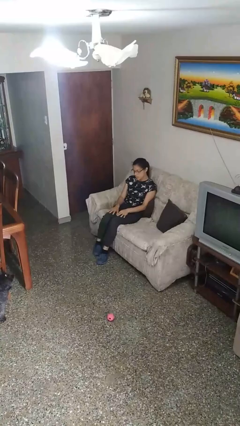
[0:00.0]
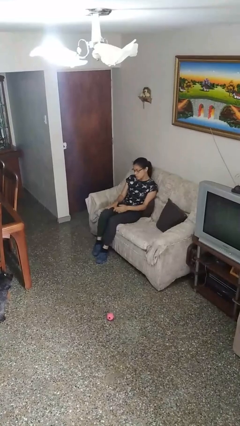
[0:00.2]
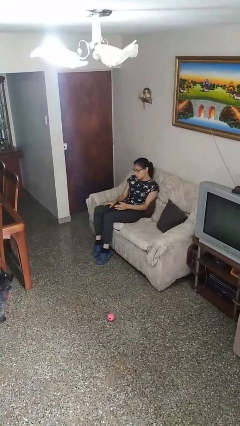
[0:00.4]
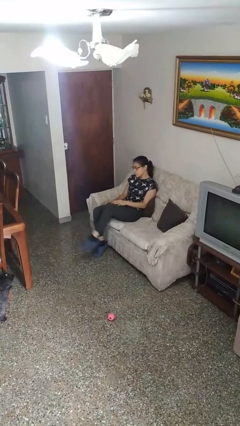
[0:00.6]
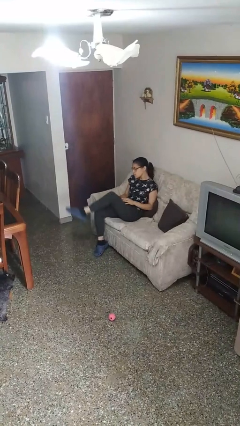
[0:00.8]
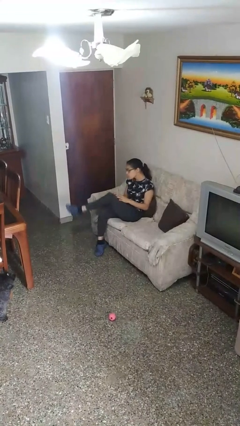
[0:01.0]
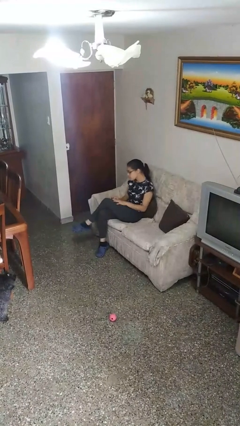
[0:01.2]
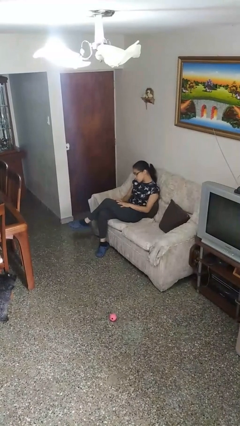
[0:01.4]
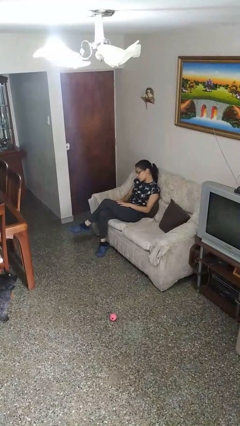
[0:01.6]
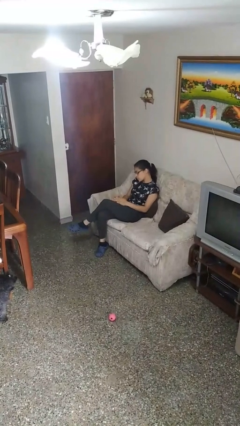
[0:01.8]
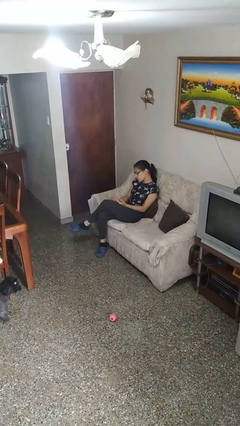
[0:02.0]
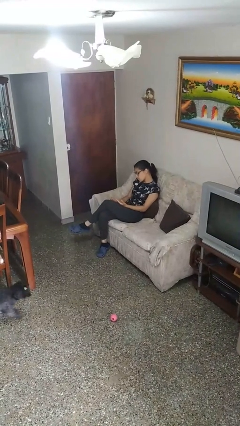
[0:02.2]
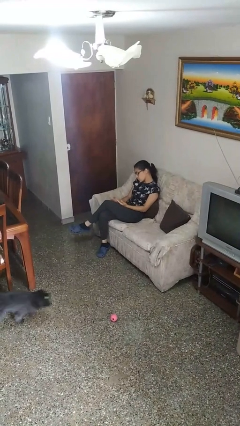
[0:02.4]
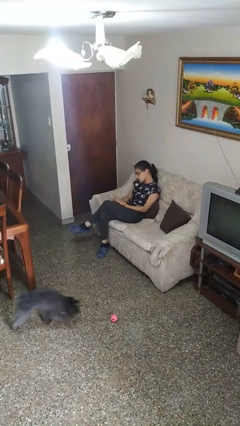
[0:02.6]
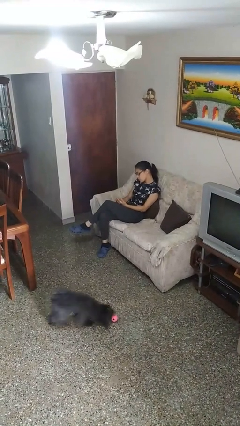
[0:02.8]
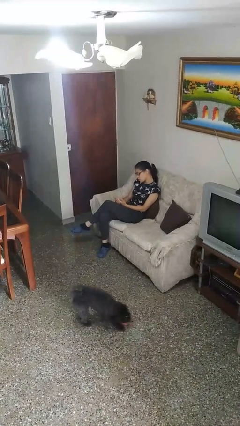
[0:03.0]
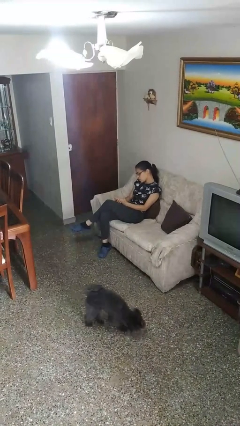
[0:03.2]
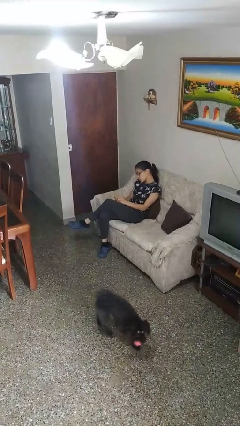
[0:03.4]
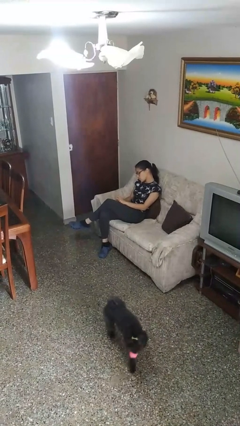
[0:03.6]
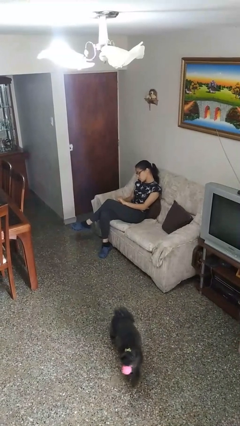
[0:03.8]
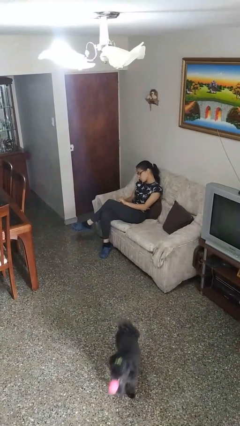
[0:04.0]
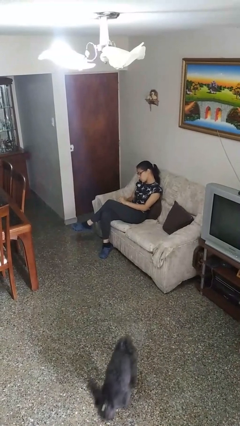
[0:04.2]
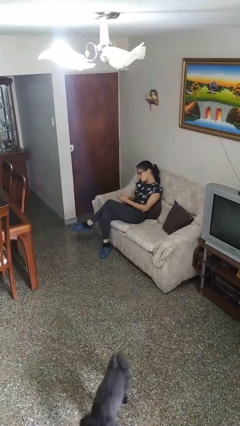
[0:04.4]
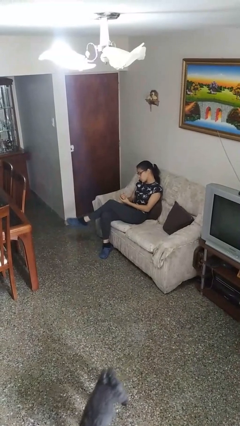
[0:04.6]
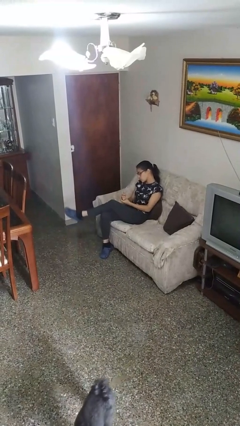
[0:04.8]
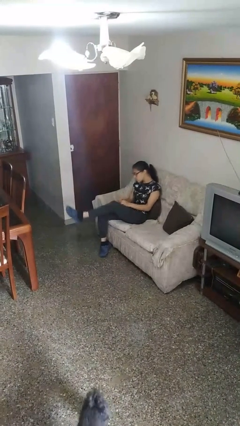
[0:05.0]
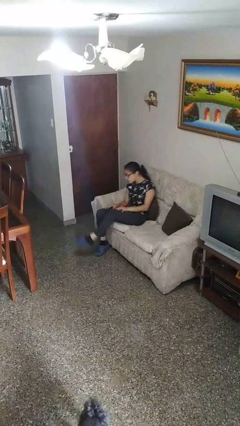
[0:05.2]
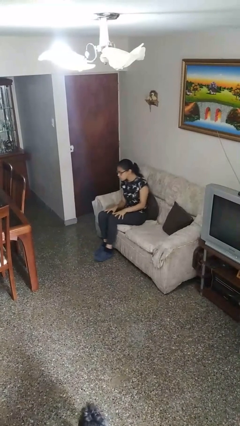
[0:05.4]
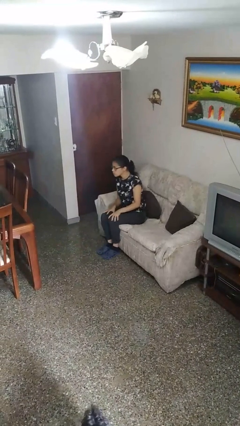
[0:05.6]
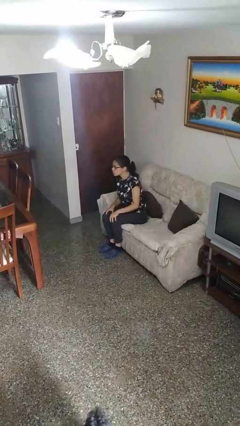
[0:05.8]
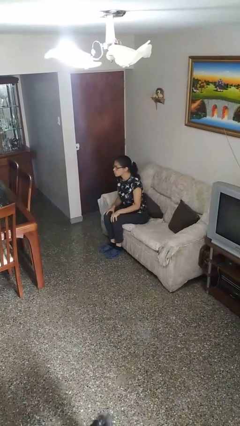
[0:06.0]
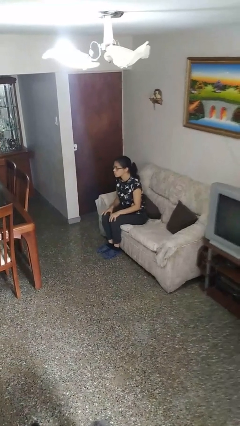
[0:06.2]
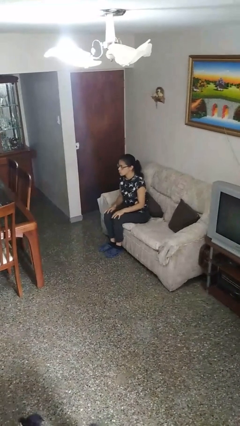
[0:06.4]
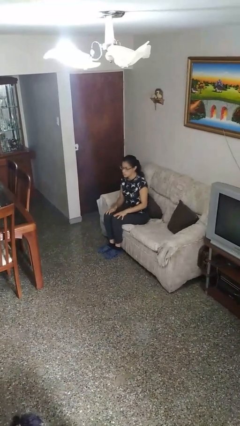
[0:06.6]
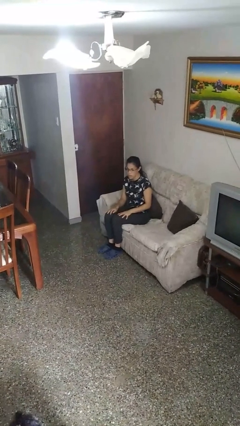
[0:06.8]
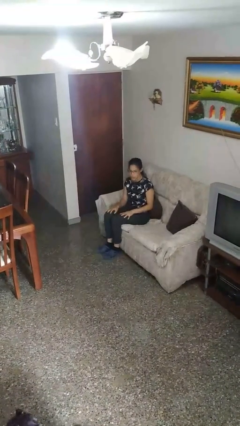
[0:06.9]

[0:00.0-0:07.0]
person looks at hands in lap

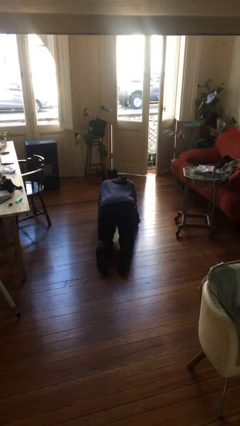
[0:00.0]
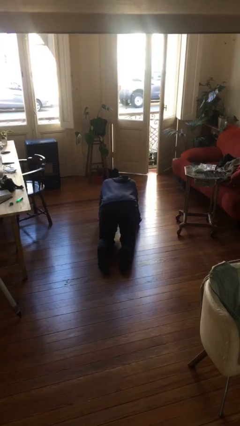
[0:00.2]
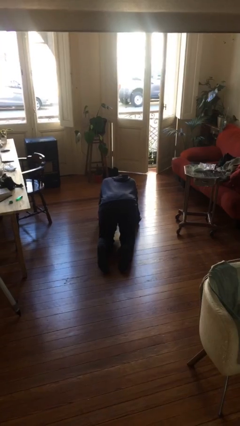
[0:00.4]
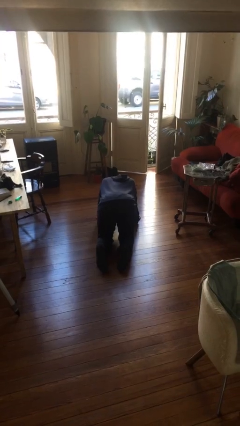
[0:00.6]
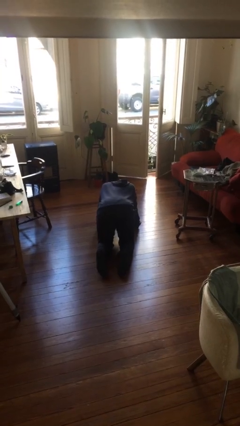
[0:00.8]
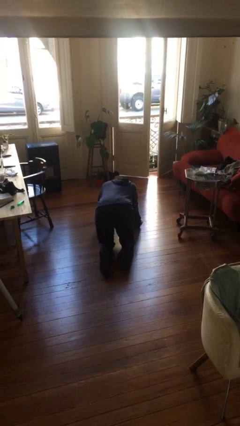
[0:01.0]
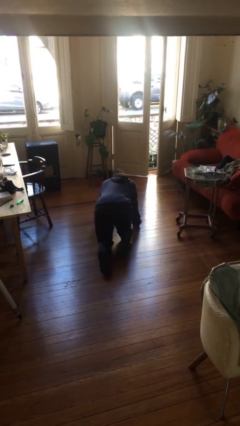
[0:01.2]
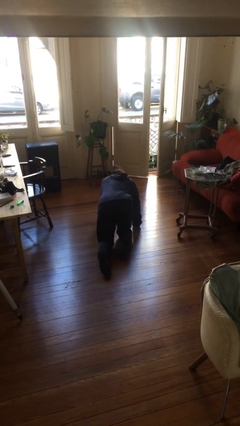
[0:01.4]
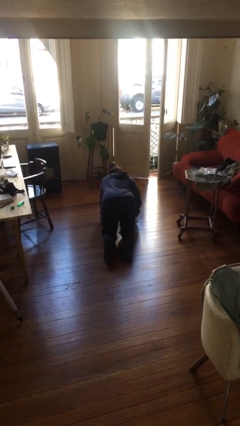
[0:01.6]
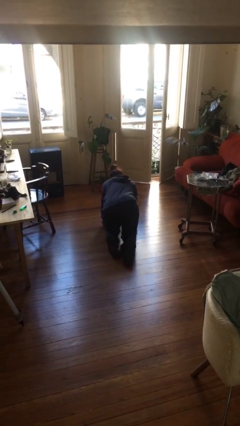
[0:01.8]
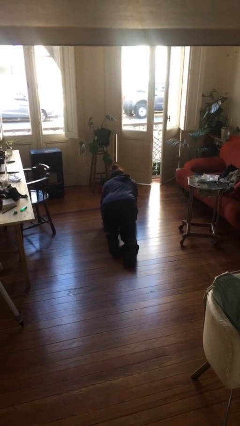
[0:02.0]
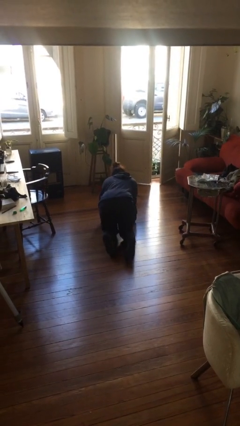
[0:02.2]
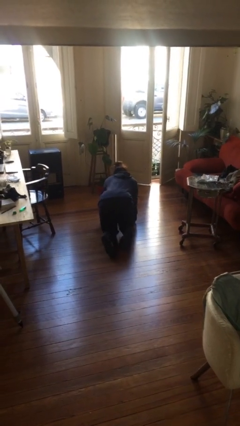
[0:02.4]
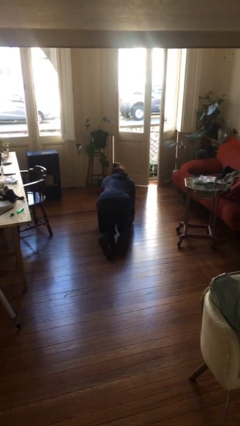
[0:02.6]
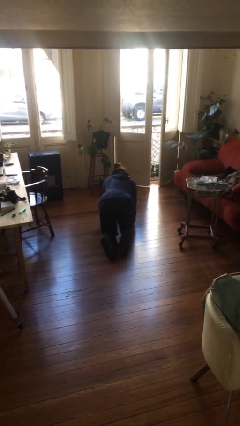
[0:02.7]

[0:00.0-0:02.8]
person crawls

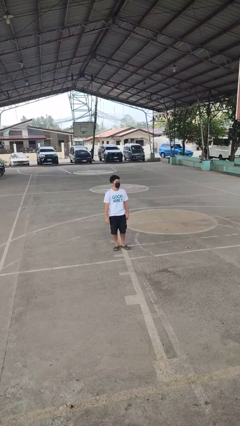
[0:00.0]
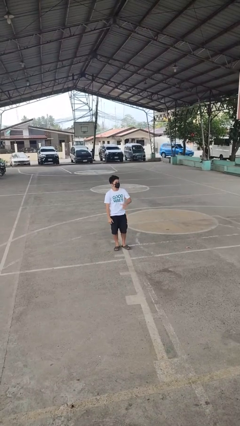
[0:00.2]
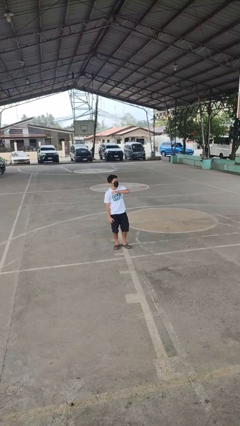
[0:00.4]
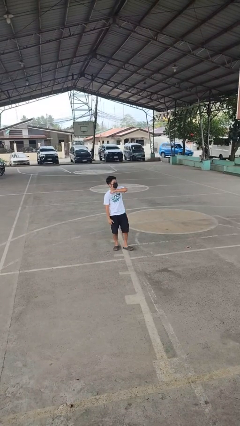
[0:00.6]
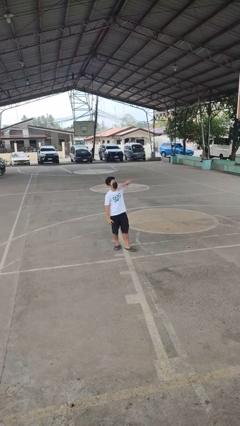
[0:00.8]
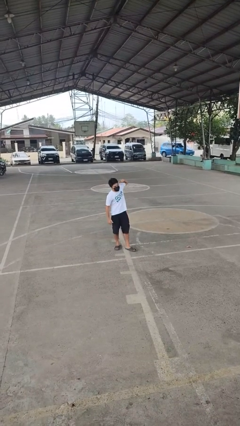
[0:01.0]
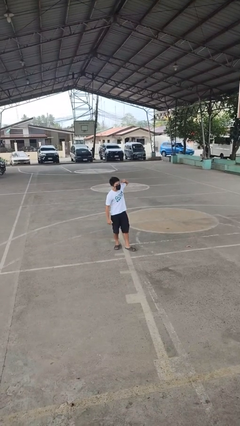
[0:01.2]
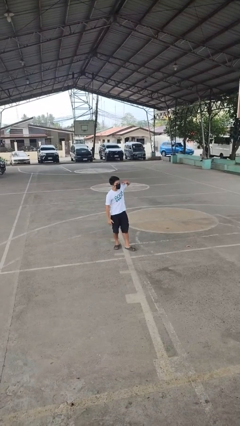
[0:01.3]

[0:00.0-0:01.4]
person gestures cut

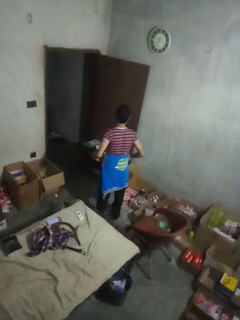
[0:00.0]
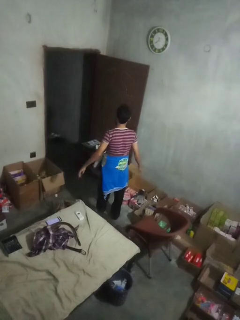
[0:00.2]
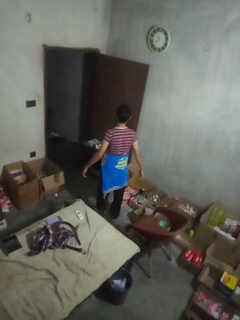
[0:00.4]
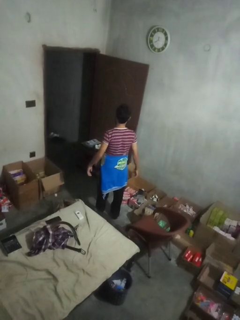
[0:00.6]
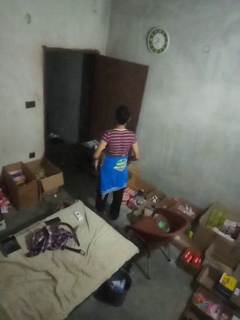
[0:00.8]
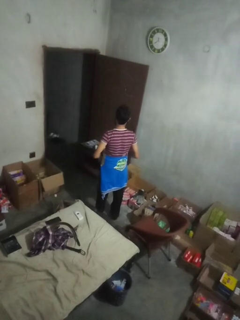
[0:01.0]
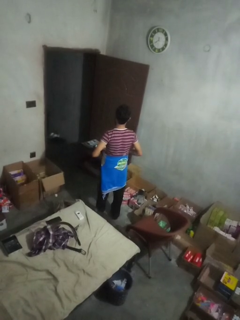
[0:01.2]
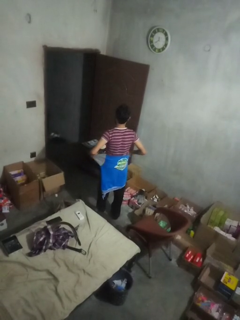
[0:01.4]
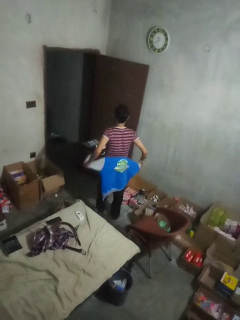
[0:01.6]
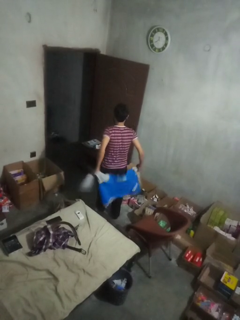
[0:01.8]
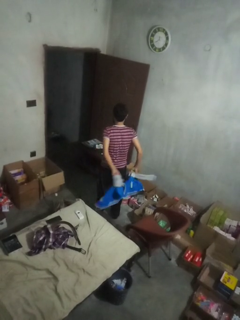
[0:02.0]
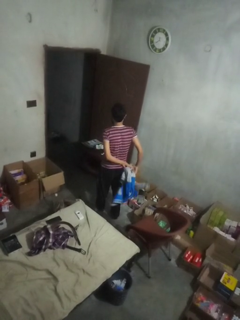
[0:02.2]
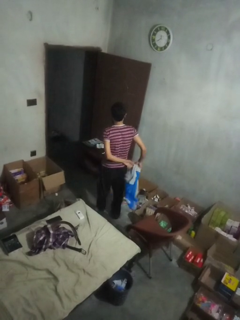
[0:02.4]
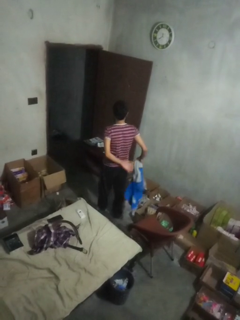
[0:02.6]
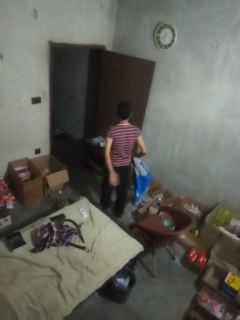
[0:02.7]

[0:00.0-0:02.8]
person unties jacket around waist

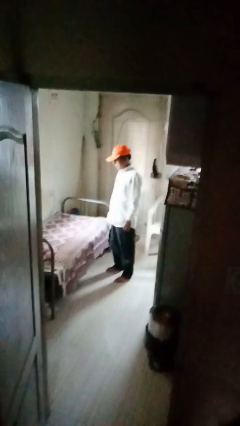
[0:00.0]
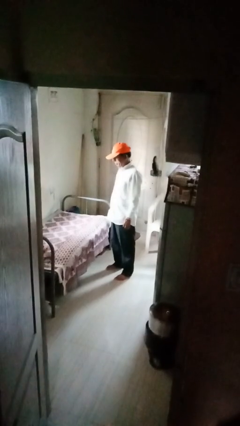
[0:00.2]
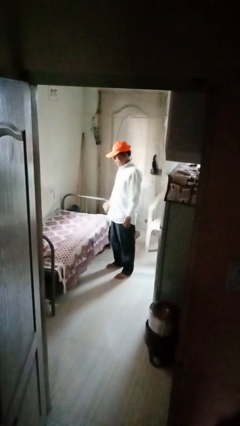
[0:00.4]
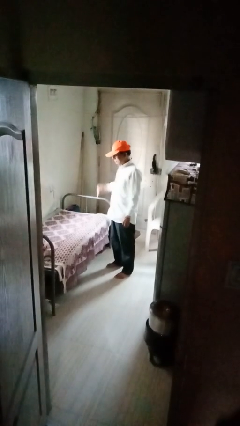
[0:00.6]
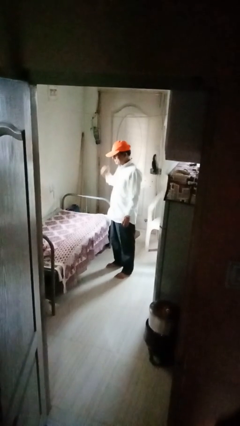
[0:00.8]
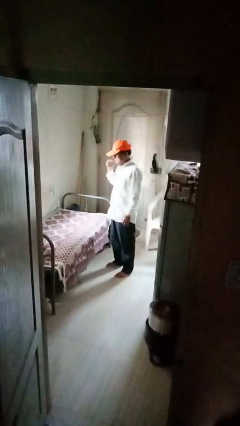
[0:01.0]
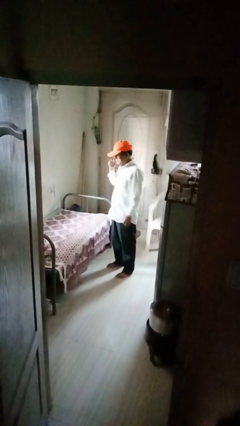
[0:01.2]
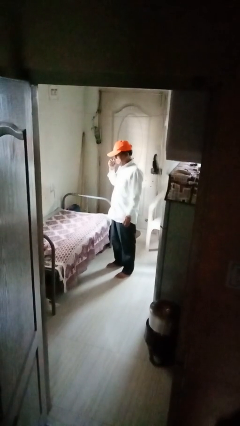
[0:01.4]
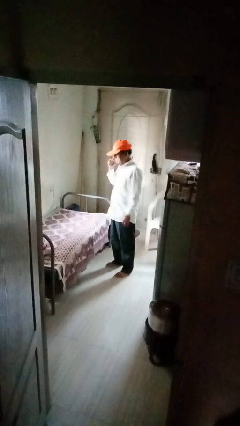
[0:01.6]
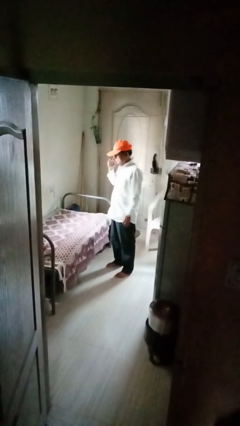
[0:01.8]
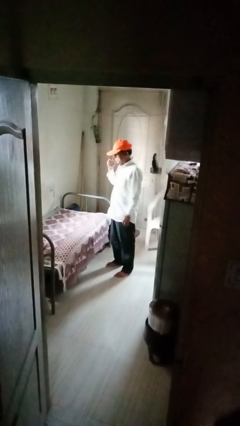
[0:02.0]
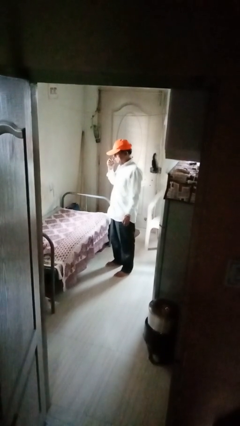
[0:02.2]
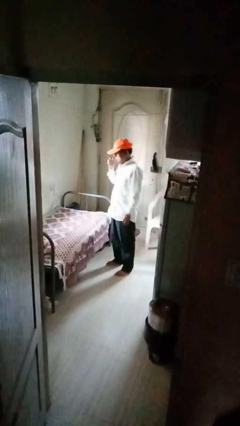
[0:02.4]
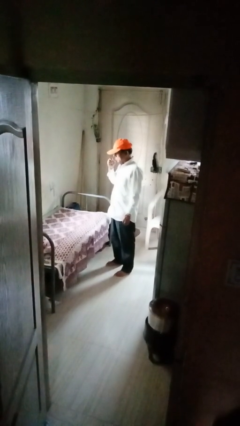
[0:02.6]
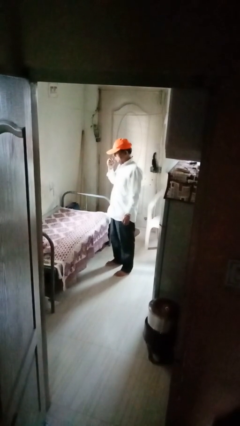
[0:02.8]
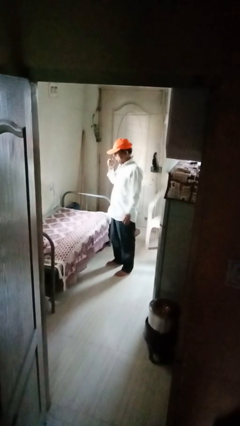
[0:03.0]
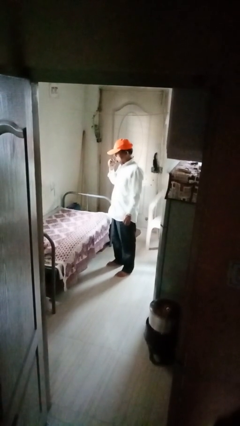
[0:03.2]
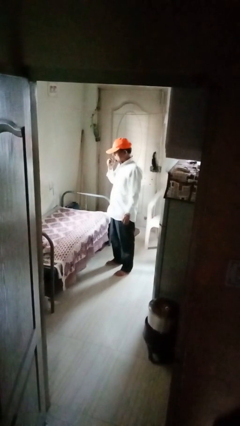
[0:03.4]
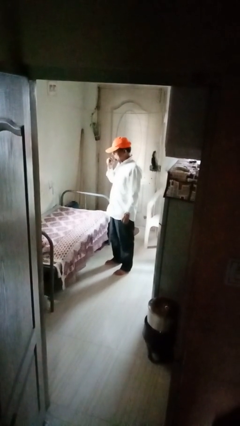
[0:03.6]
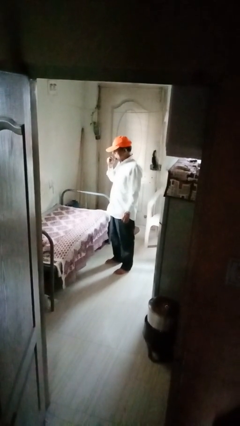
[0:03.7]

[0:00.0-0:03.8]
person flosses

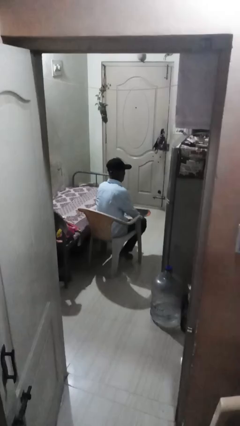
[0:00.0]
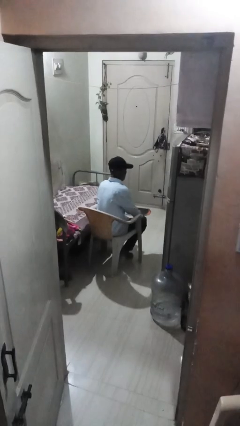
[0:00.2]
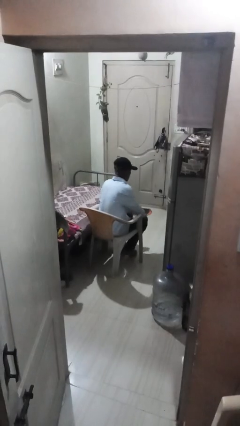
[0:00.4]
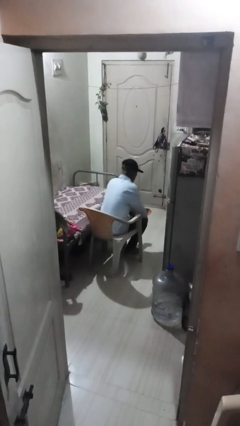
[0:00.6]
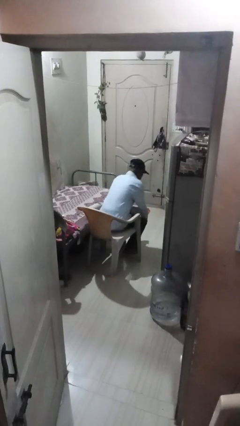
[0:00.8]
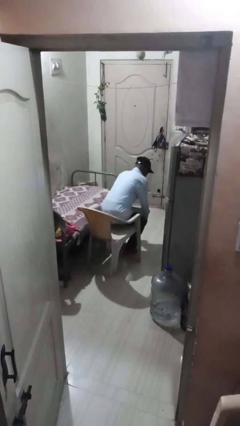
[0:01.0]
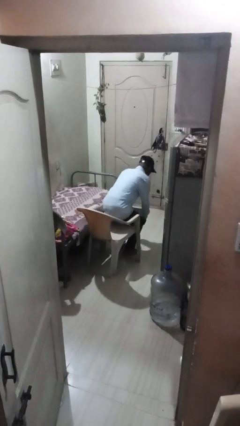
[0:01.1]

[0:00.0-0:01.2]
person falls from chair
